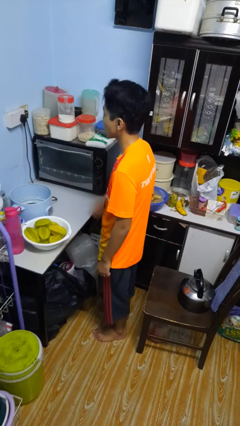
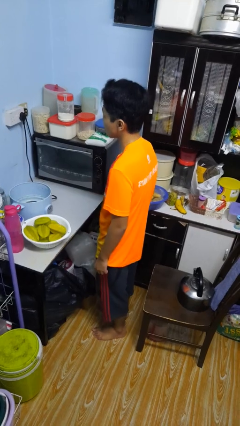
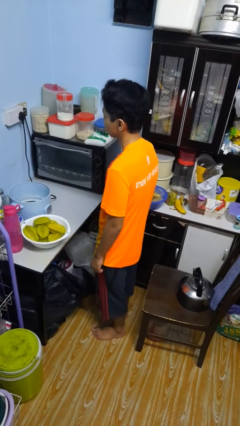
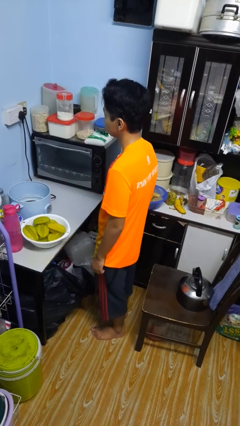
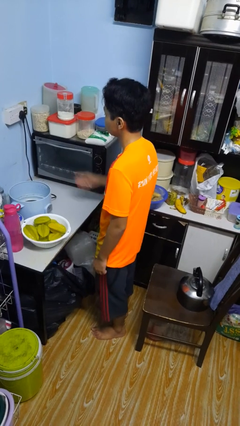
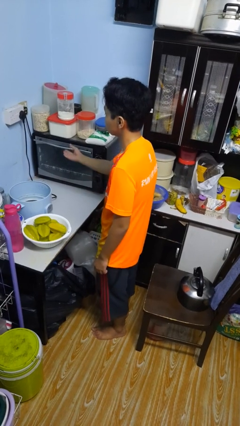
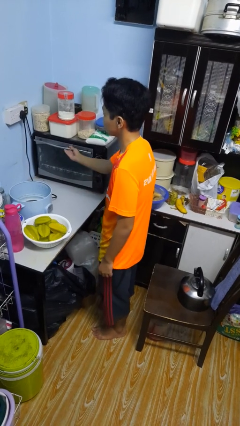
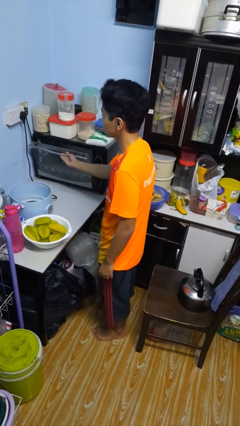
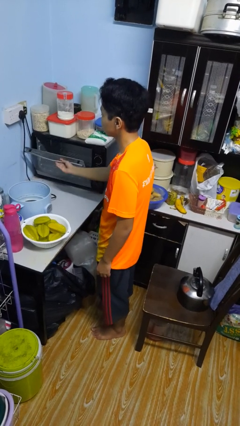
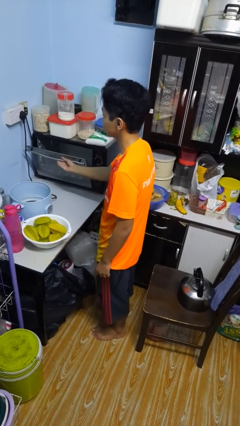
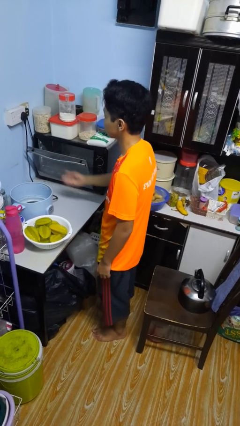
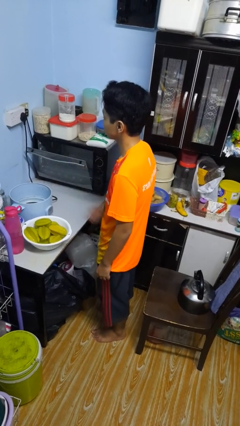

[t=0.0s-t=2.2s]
person opens microwave

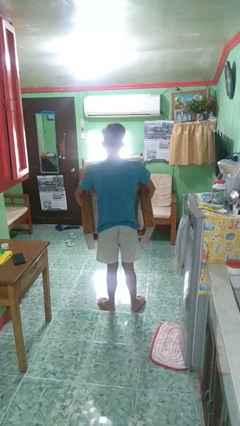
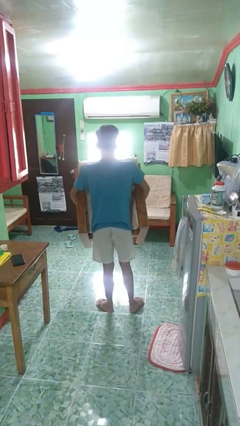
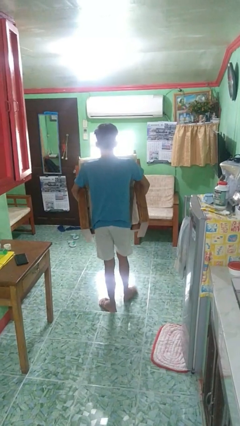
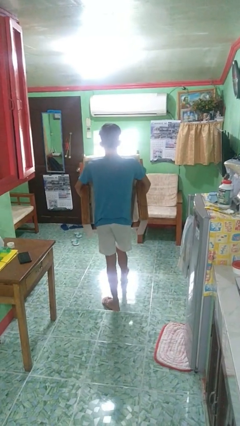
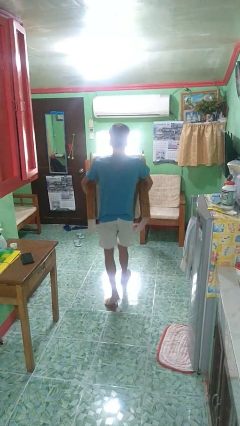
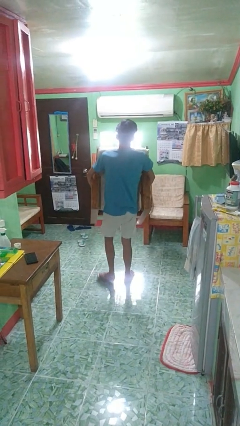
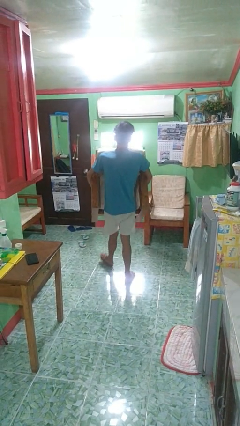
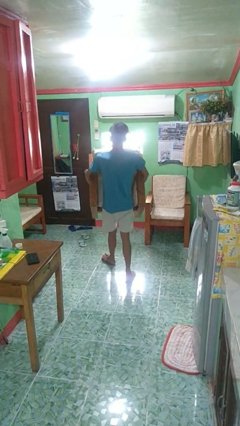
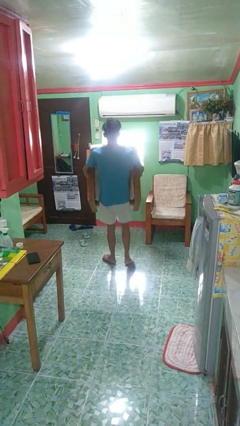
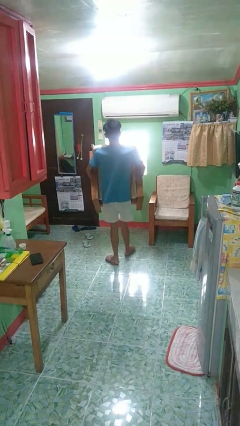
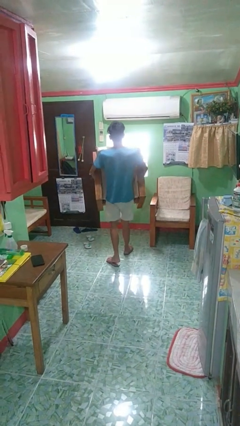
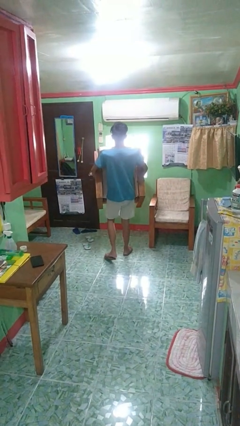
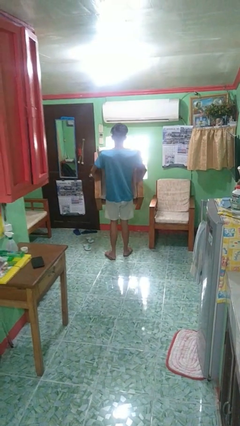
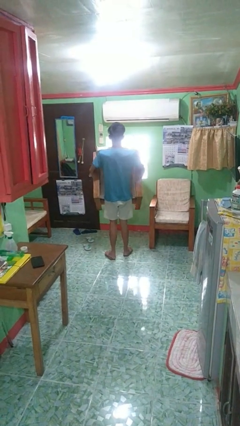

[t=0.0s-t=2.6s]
person carries furniture

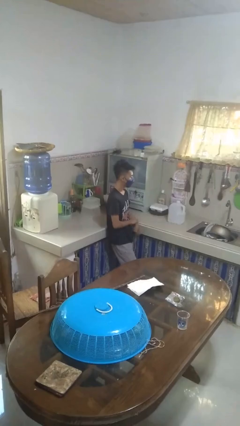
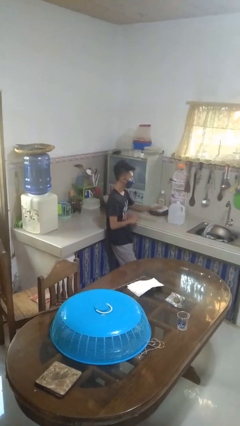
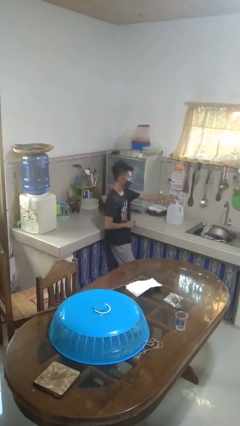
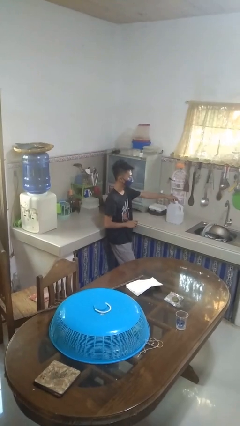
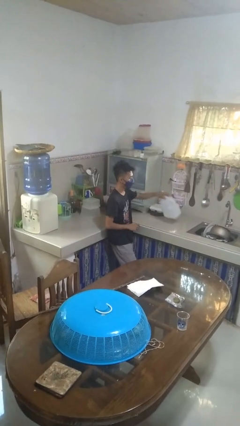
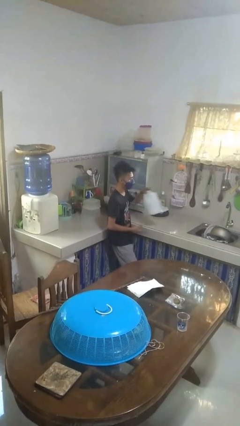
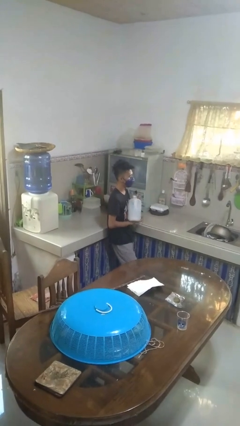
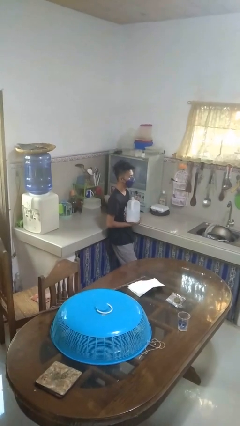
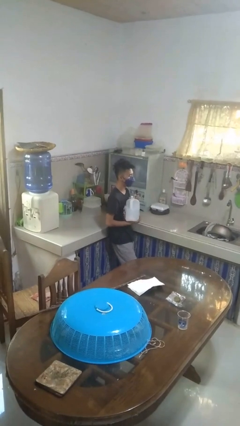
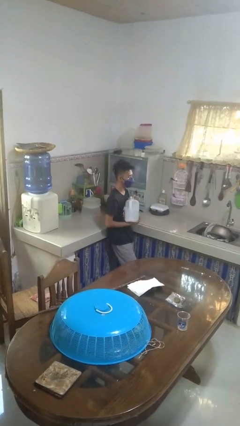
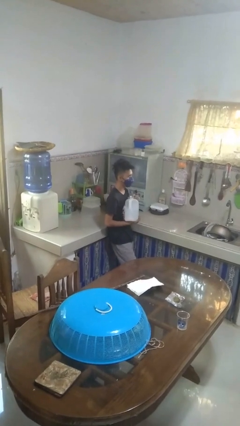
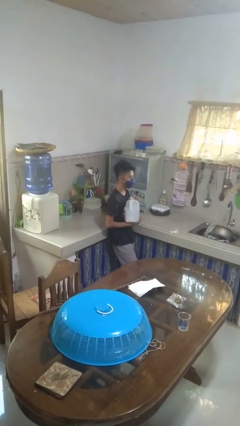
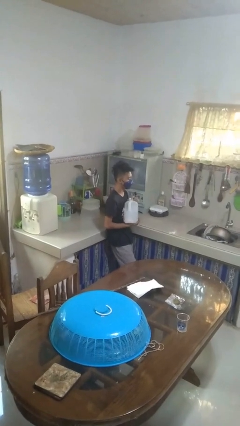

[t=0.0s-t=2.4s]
person picks up object from countertop

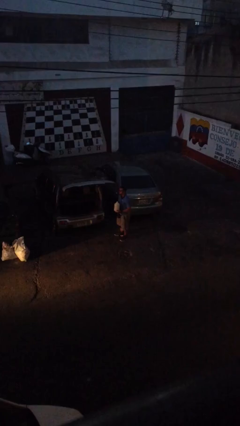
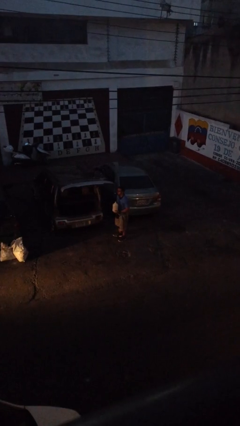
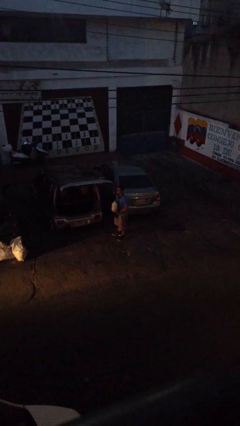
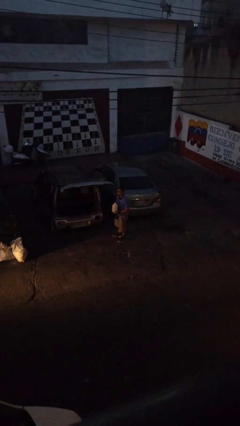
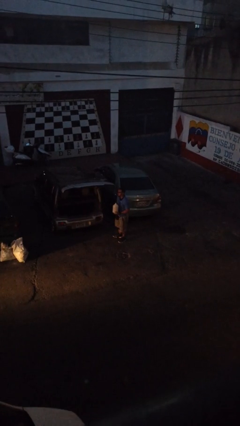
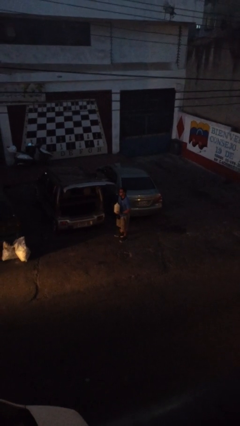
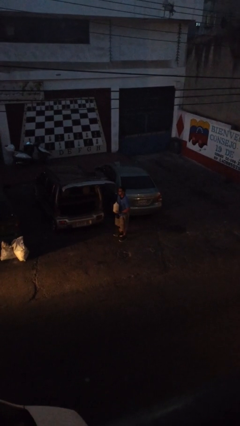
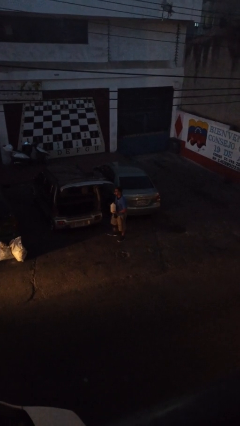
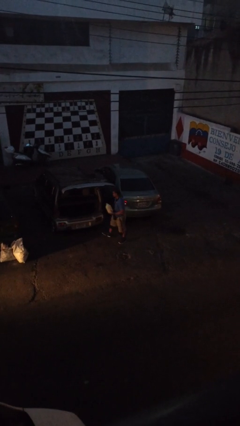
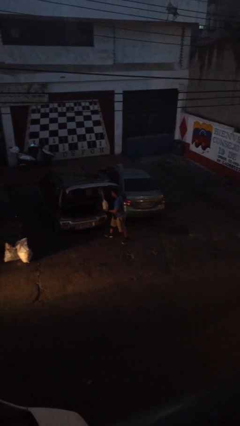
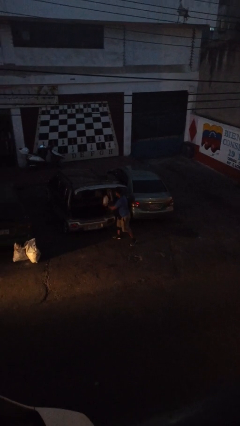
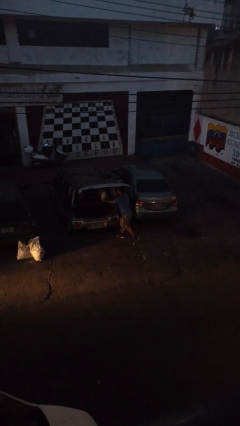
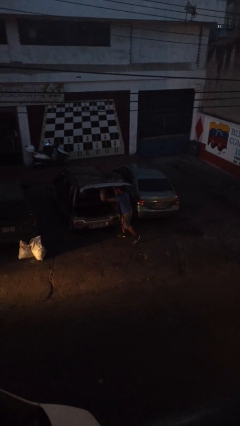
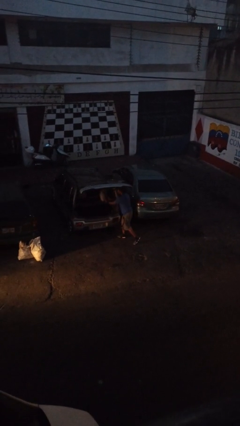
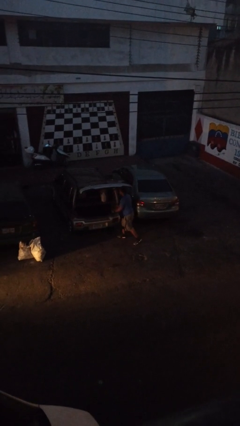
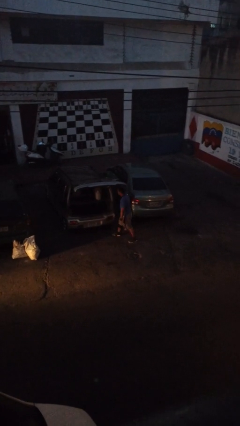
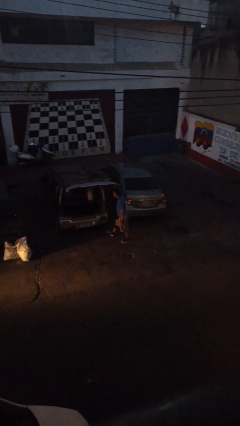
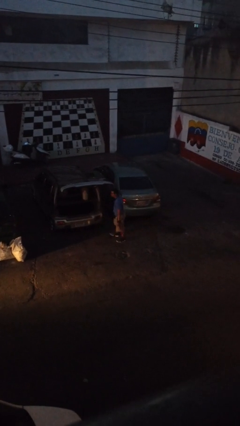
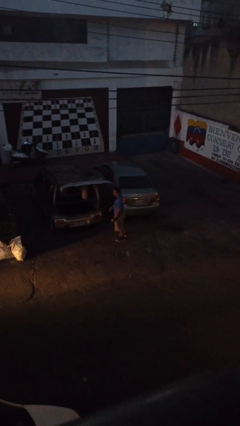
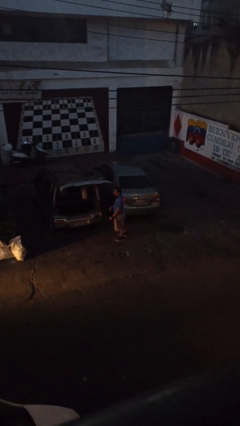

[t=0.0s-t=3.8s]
person loads car

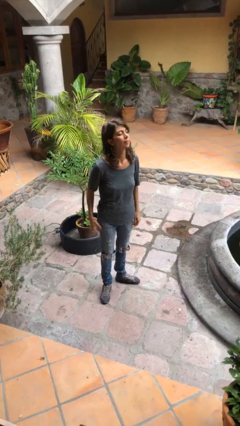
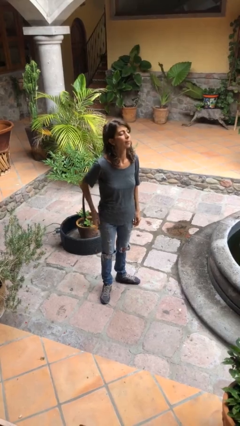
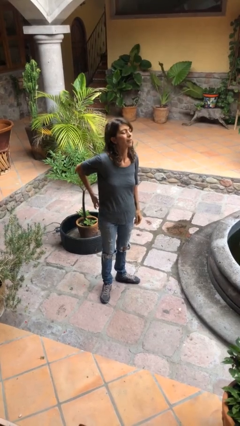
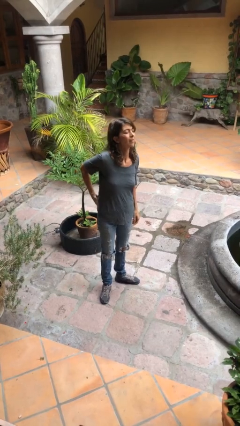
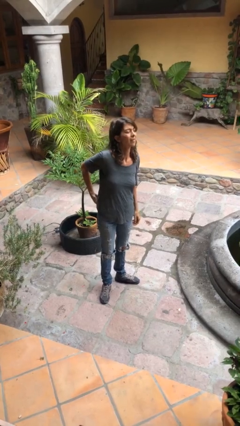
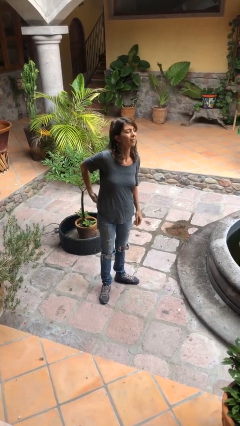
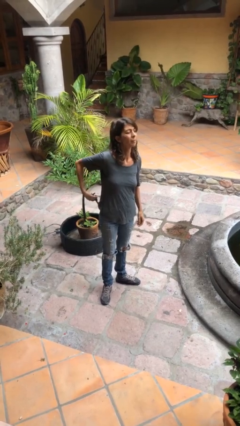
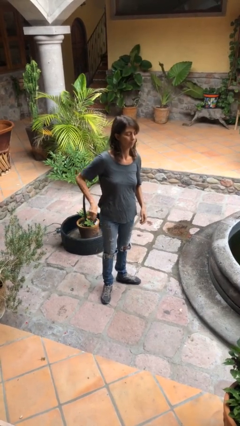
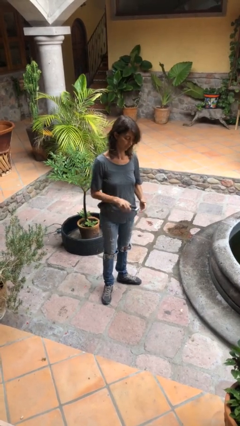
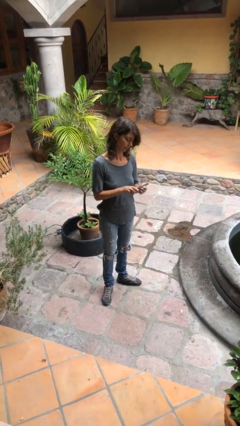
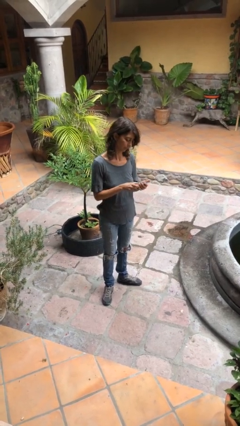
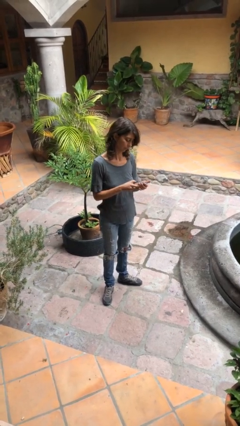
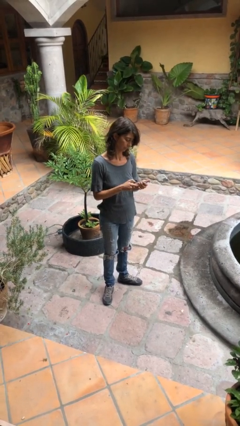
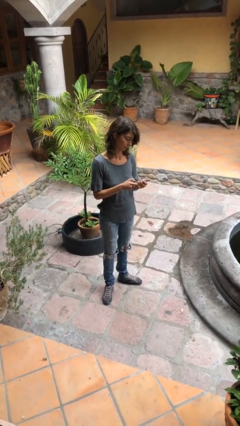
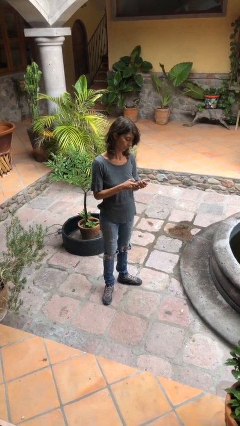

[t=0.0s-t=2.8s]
person takes phone from pocket

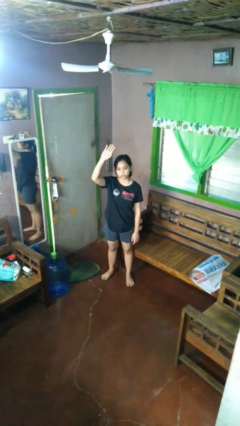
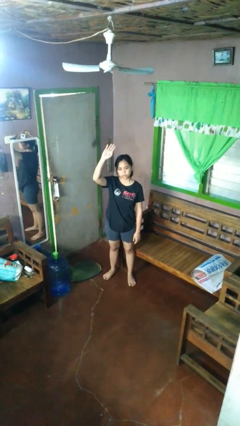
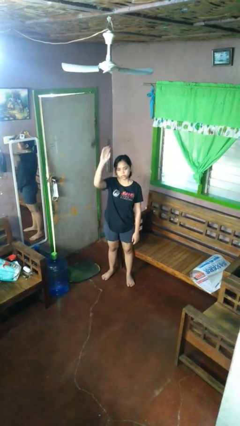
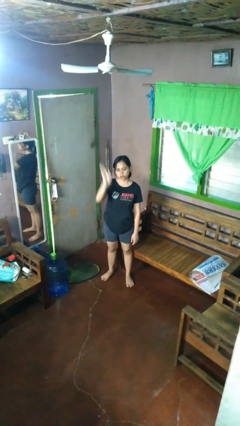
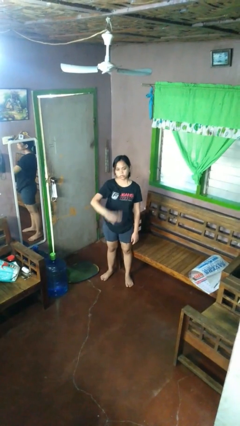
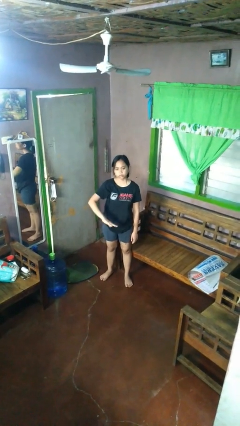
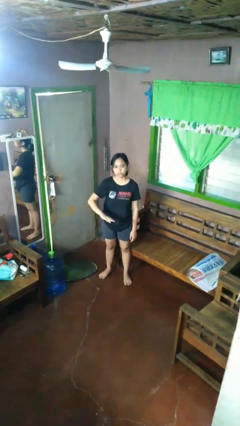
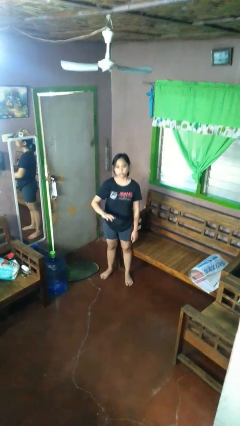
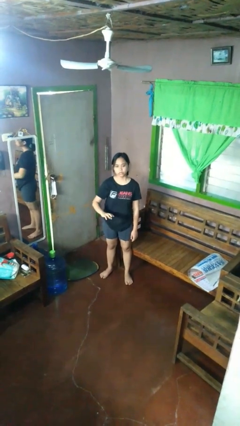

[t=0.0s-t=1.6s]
person gestures swipe down

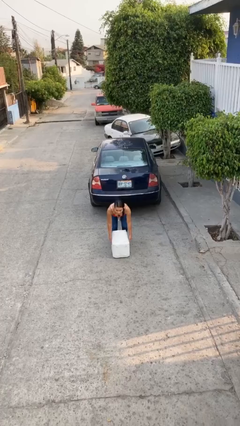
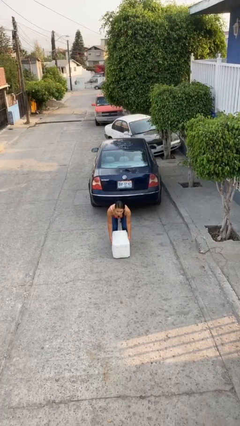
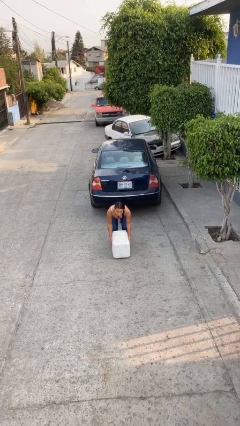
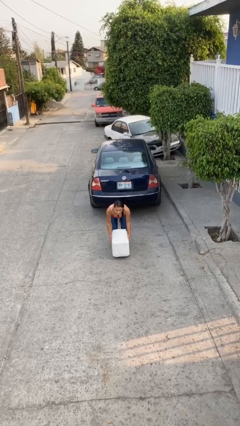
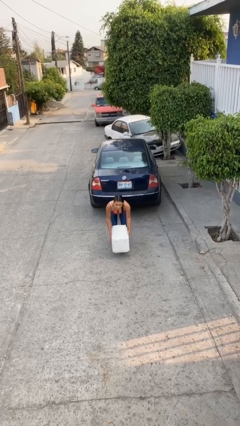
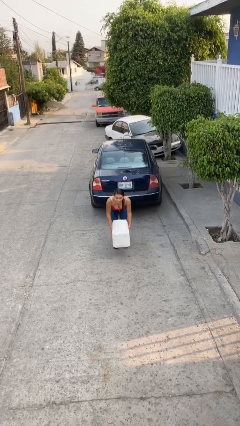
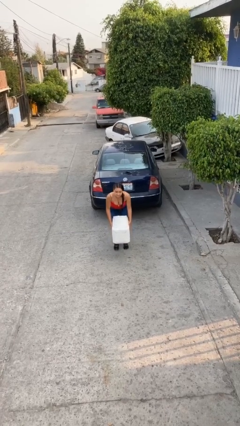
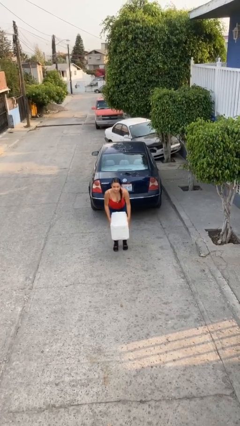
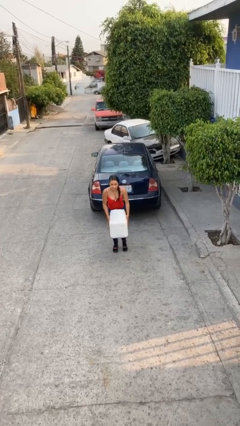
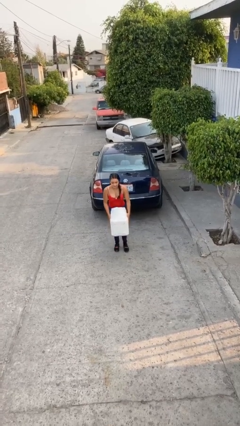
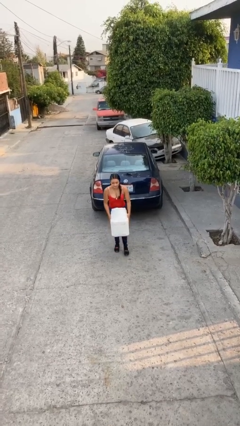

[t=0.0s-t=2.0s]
person picks up object from floor
